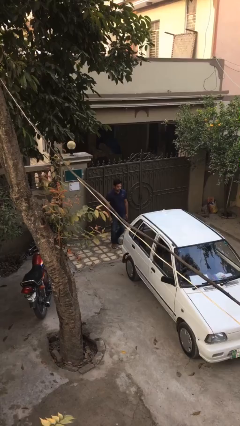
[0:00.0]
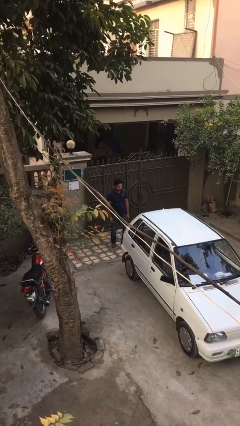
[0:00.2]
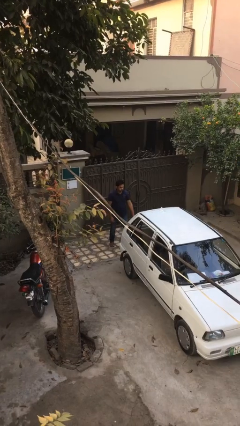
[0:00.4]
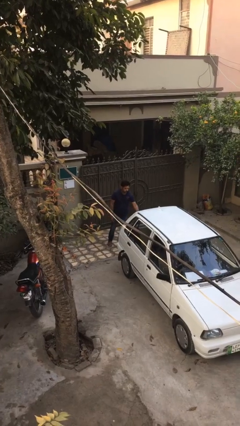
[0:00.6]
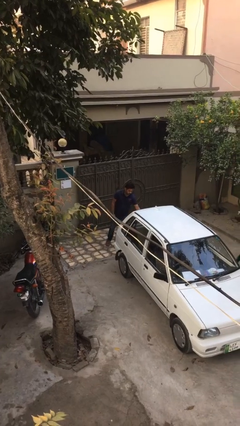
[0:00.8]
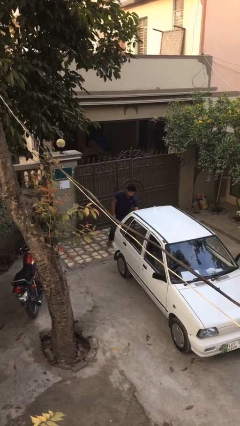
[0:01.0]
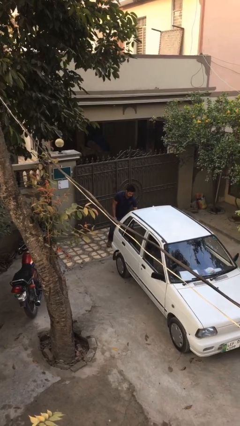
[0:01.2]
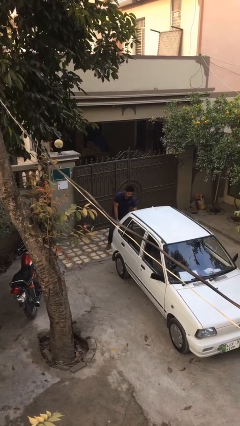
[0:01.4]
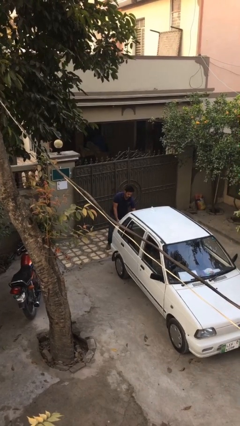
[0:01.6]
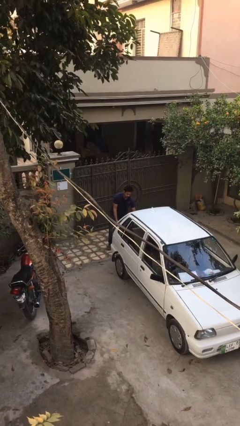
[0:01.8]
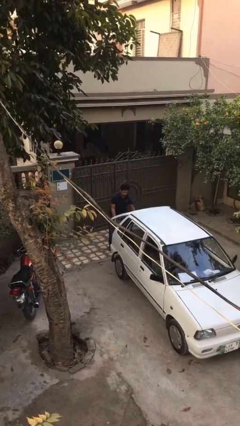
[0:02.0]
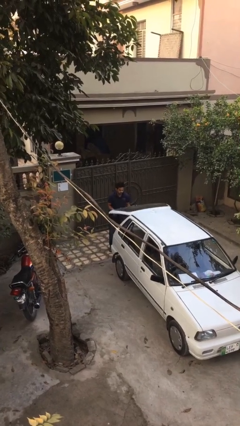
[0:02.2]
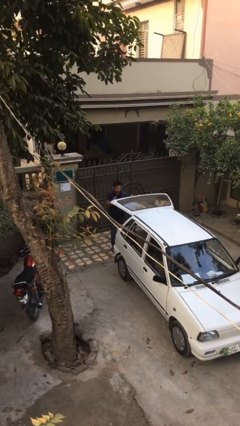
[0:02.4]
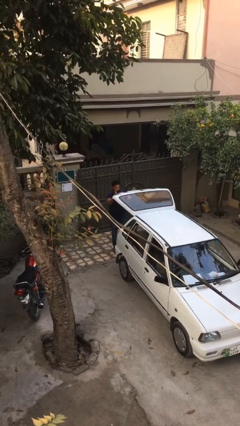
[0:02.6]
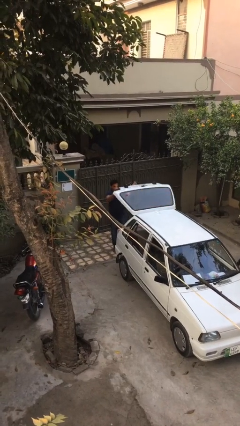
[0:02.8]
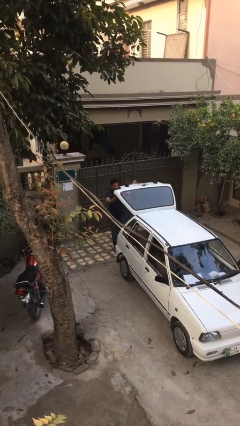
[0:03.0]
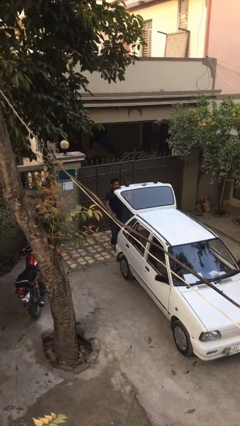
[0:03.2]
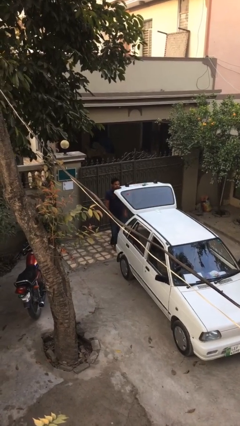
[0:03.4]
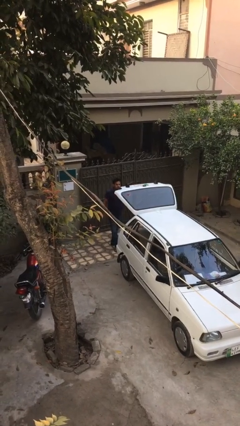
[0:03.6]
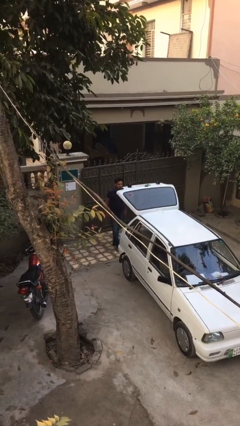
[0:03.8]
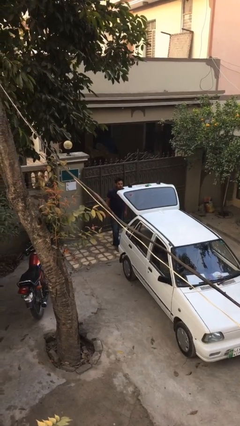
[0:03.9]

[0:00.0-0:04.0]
person opens car trunk

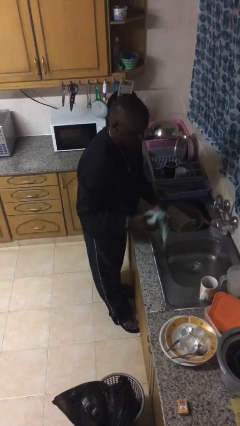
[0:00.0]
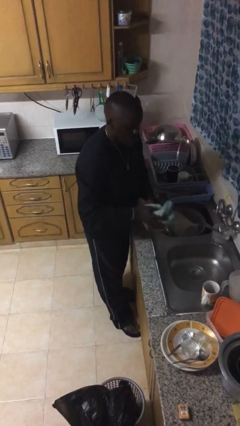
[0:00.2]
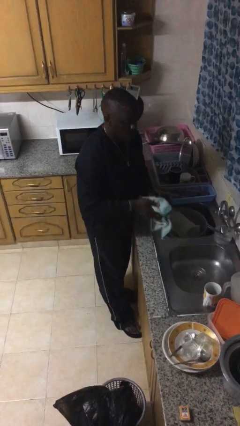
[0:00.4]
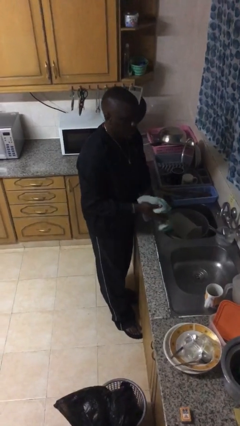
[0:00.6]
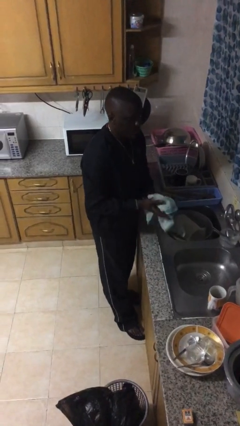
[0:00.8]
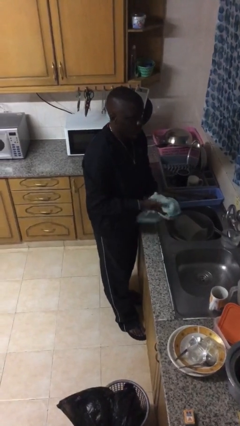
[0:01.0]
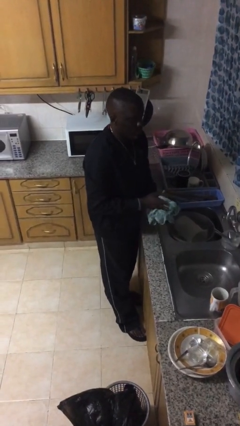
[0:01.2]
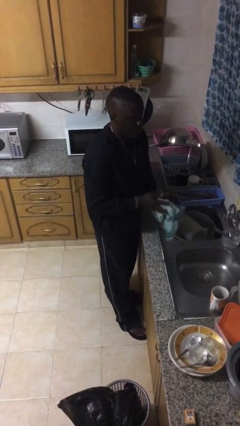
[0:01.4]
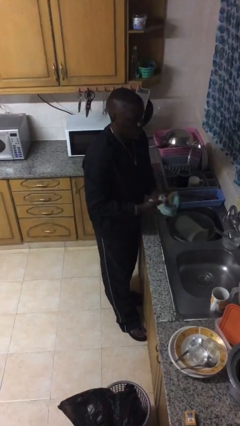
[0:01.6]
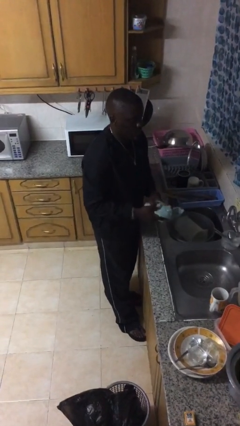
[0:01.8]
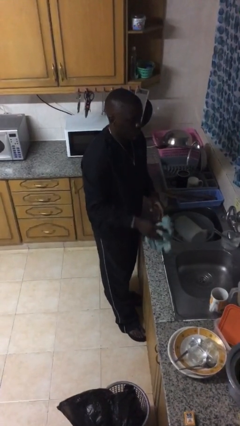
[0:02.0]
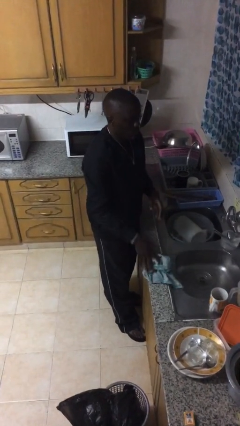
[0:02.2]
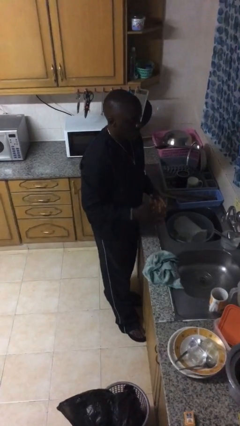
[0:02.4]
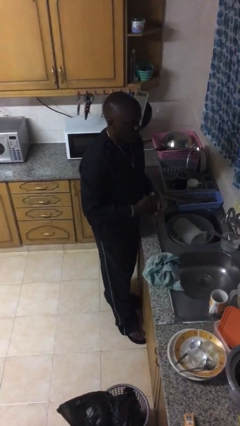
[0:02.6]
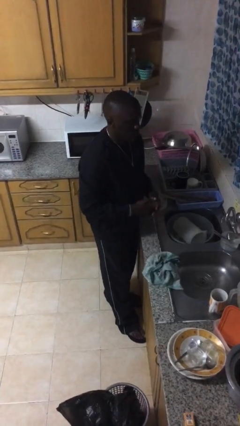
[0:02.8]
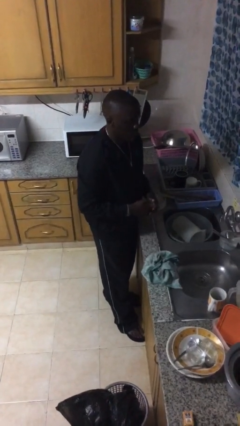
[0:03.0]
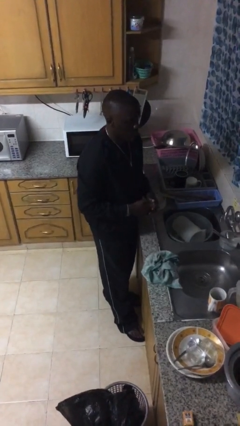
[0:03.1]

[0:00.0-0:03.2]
person dries hands with towel

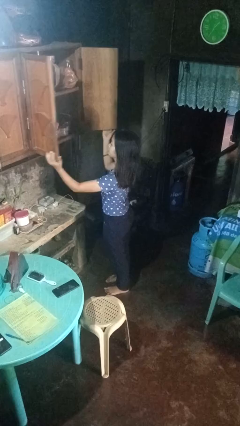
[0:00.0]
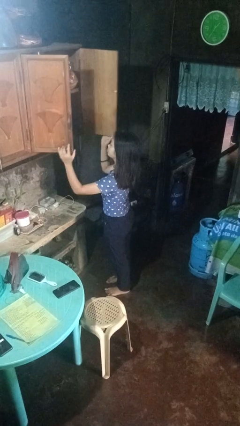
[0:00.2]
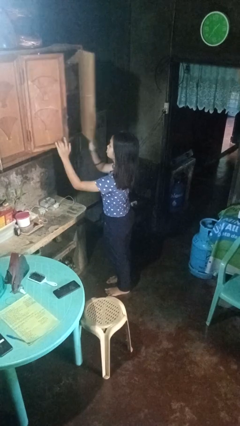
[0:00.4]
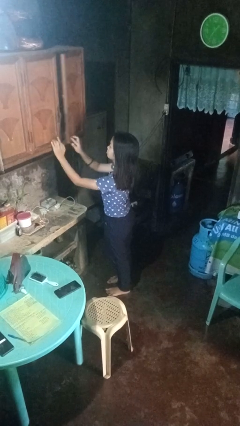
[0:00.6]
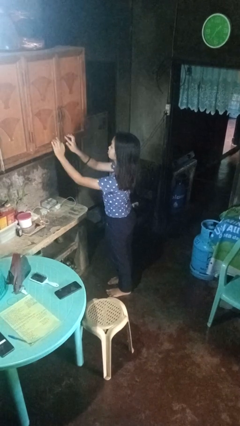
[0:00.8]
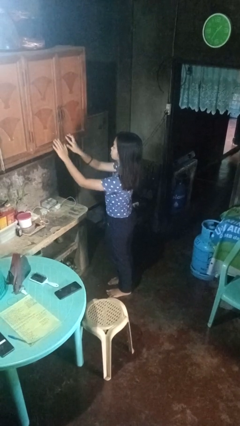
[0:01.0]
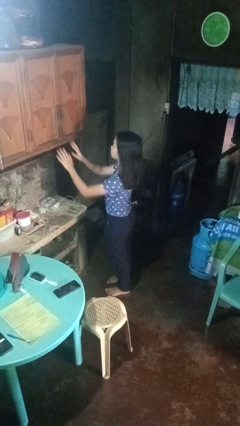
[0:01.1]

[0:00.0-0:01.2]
person closes cabinet

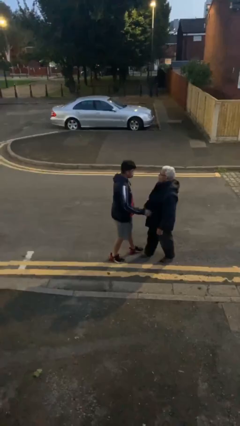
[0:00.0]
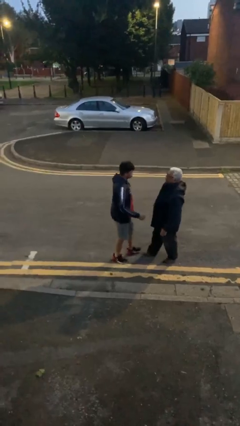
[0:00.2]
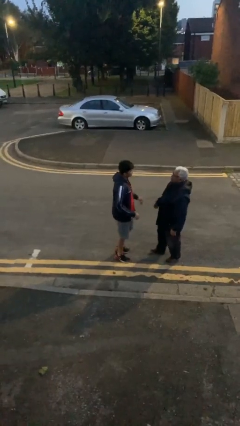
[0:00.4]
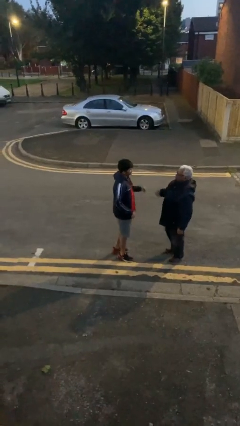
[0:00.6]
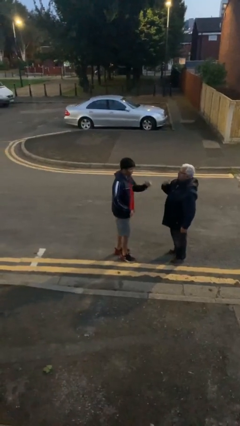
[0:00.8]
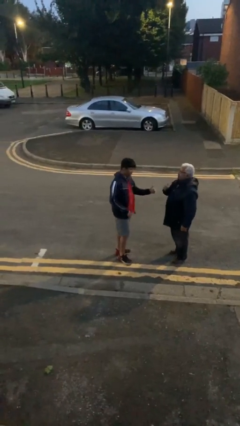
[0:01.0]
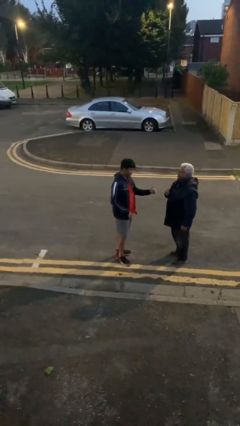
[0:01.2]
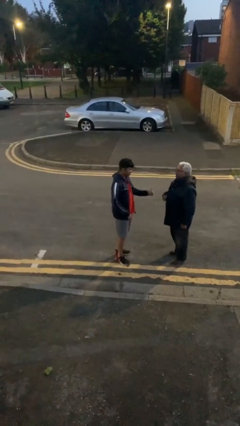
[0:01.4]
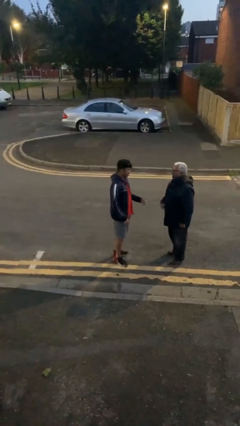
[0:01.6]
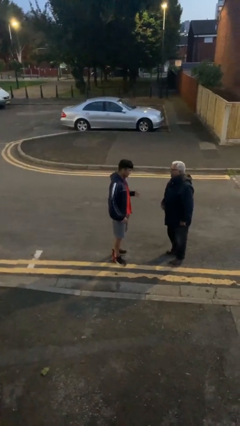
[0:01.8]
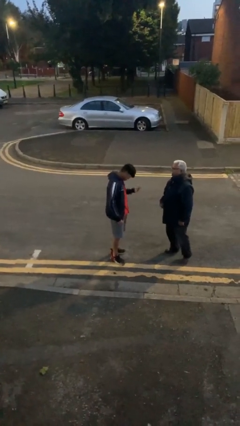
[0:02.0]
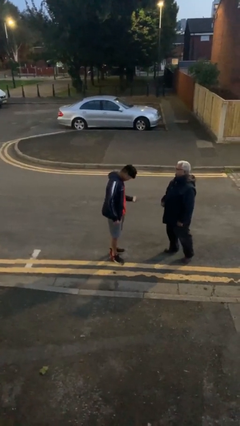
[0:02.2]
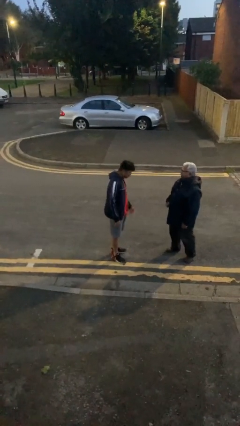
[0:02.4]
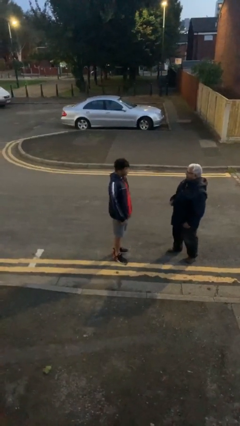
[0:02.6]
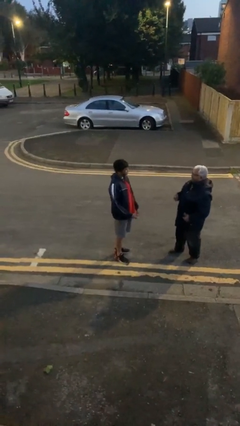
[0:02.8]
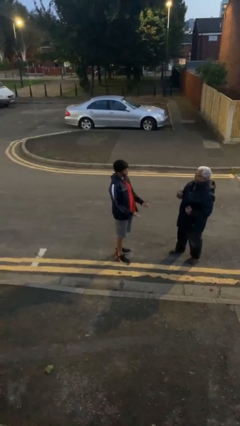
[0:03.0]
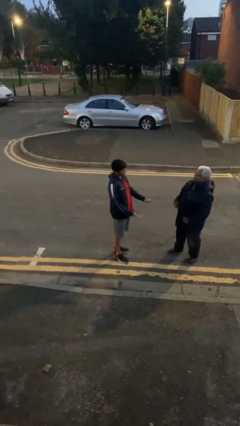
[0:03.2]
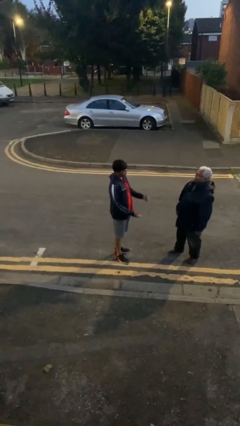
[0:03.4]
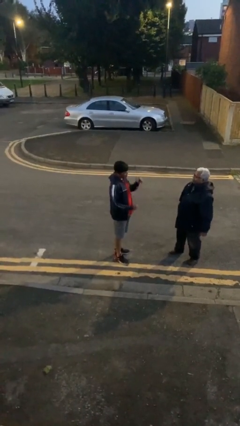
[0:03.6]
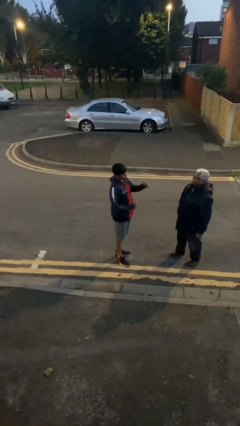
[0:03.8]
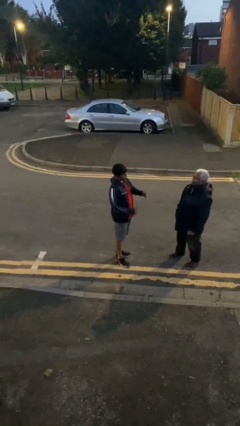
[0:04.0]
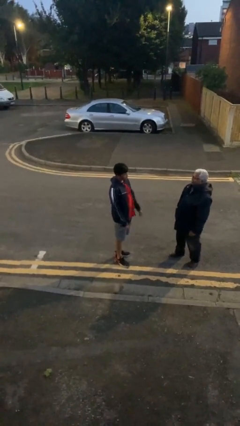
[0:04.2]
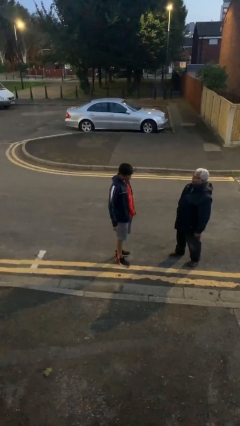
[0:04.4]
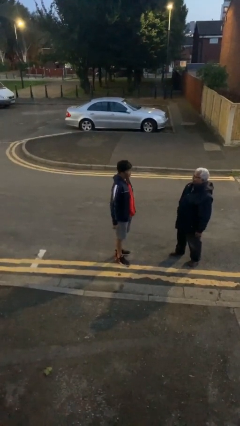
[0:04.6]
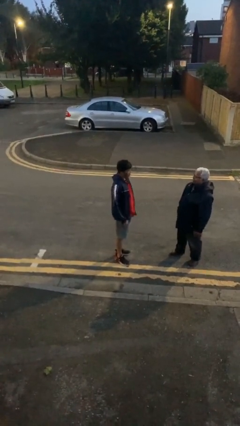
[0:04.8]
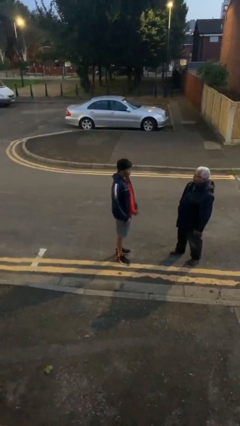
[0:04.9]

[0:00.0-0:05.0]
person talks to person

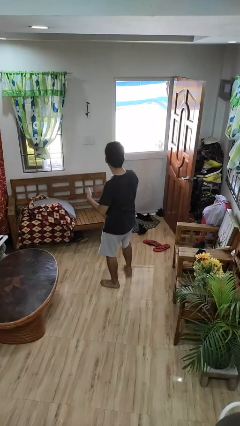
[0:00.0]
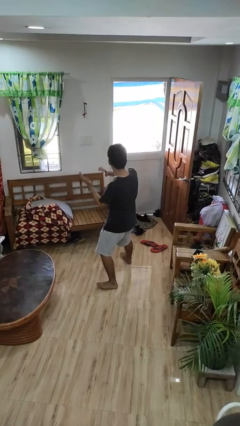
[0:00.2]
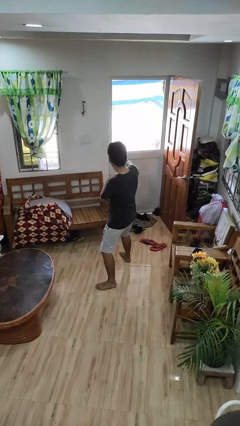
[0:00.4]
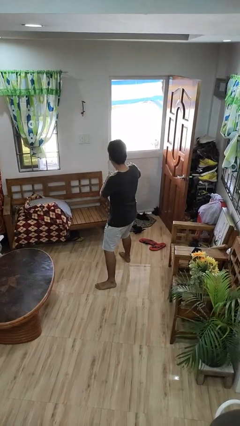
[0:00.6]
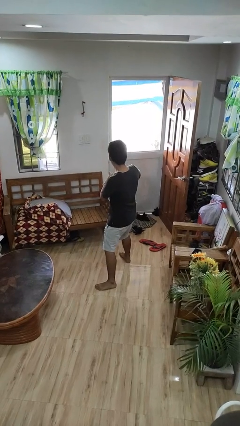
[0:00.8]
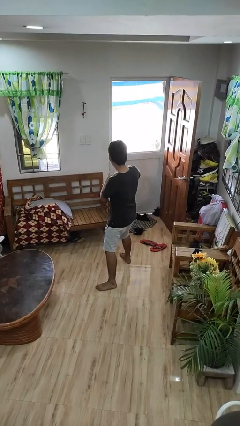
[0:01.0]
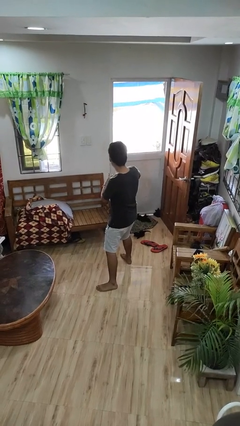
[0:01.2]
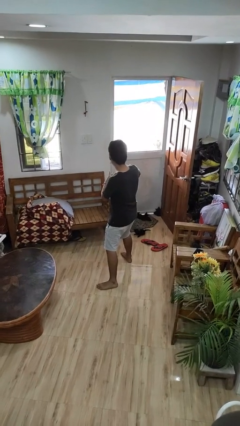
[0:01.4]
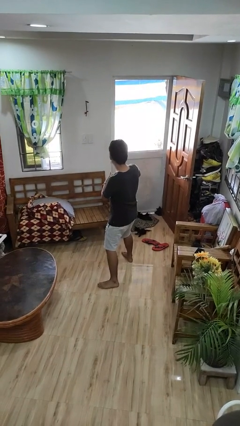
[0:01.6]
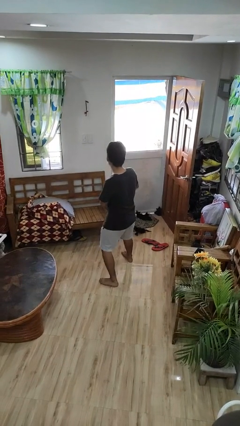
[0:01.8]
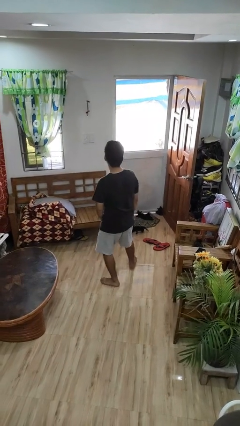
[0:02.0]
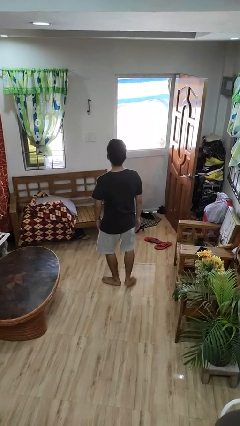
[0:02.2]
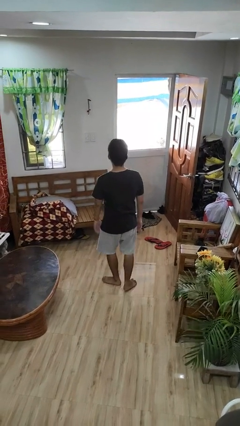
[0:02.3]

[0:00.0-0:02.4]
person karate chop

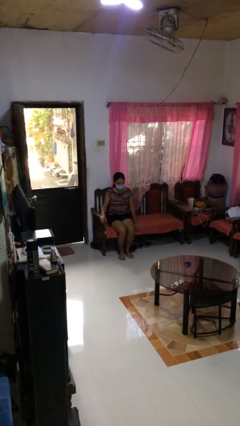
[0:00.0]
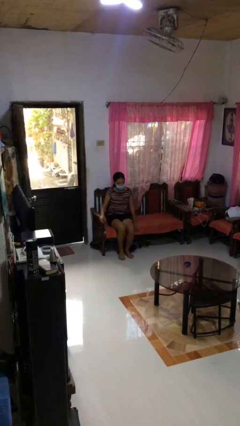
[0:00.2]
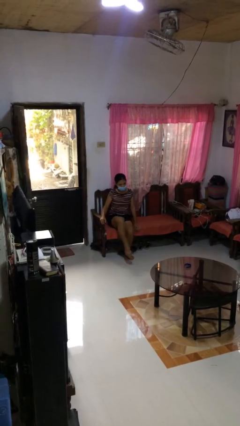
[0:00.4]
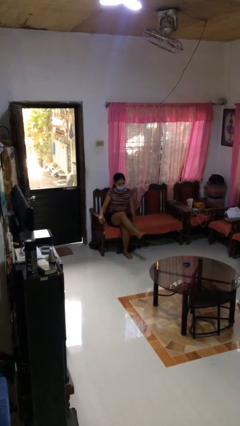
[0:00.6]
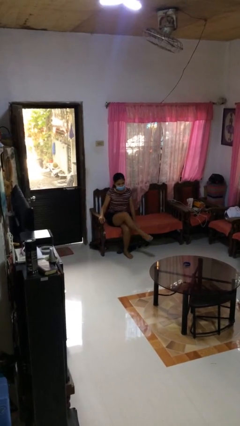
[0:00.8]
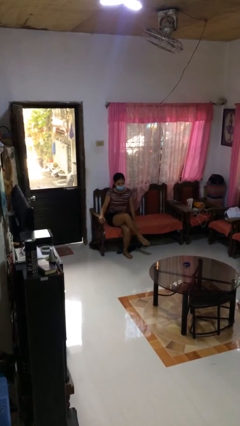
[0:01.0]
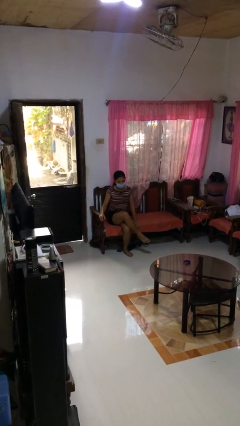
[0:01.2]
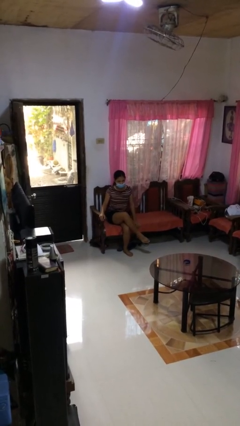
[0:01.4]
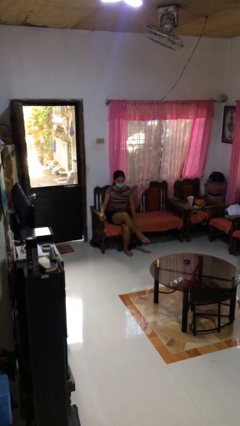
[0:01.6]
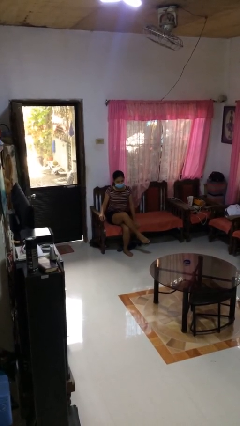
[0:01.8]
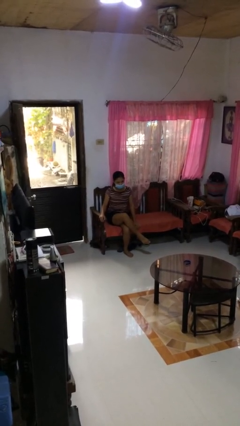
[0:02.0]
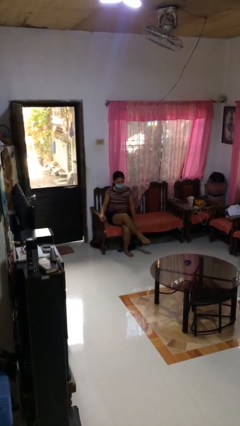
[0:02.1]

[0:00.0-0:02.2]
person crosses legs
